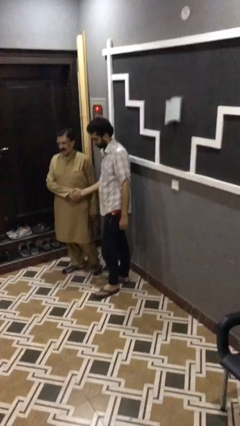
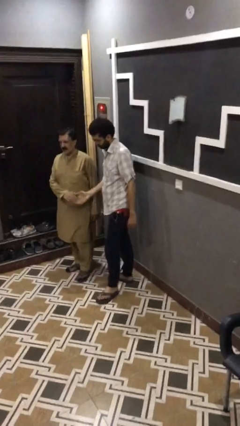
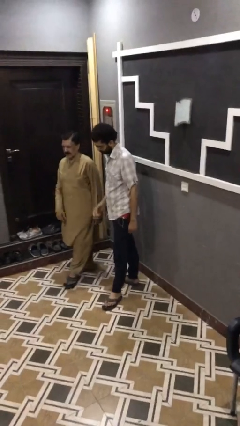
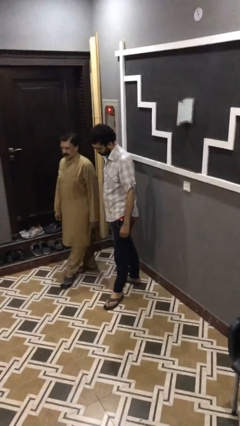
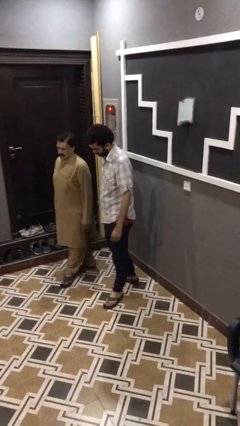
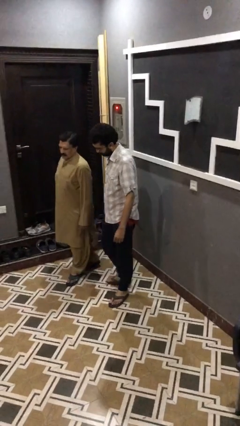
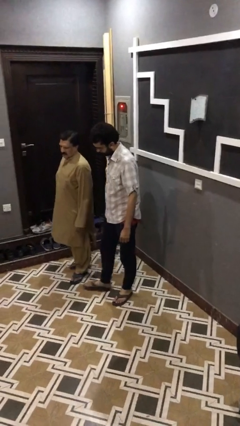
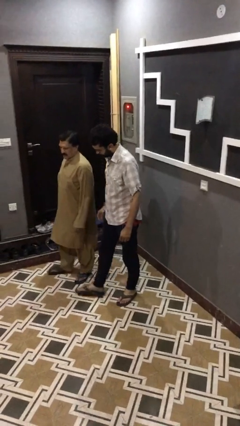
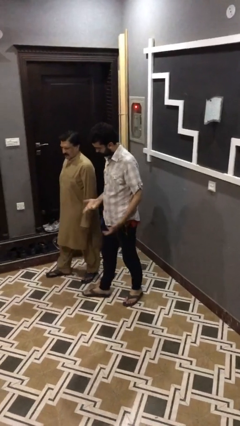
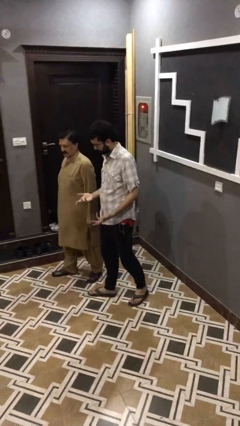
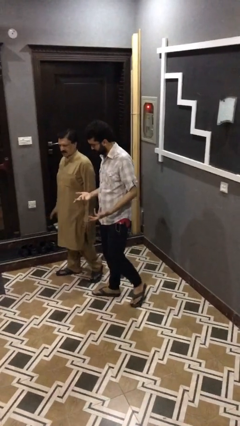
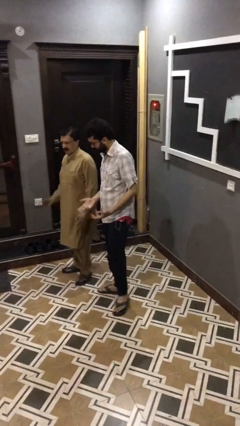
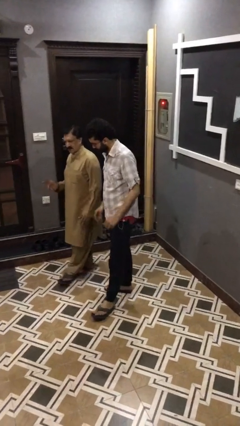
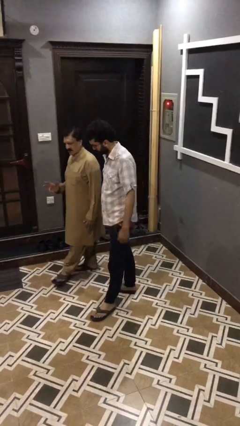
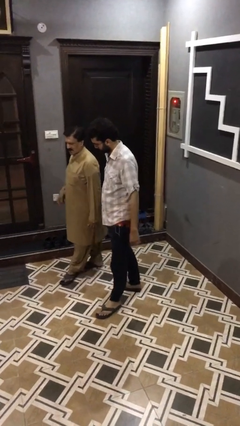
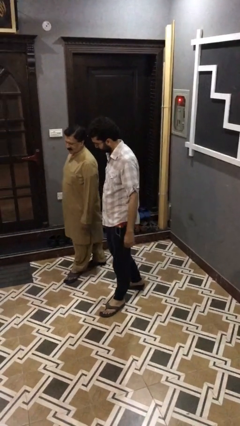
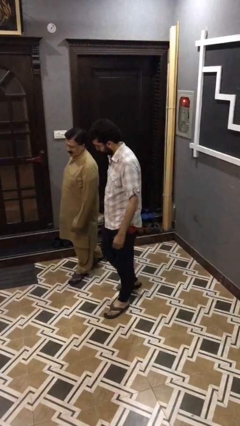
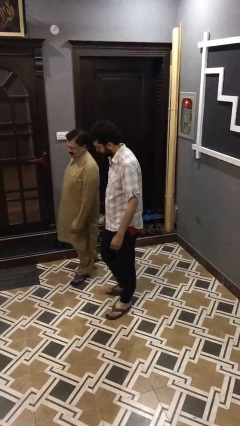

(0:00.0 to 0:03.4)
person talks to person

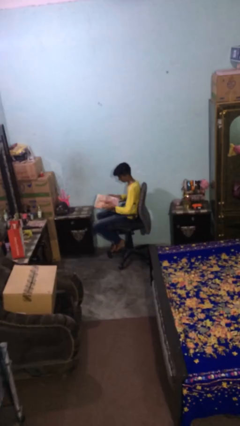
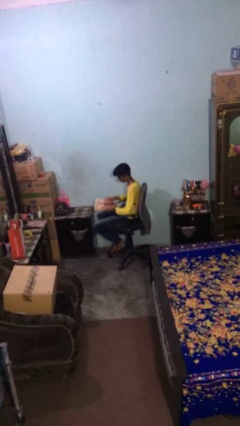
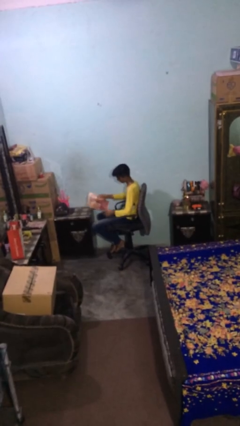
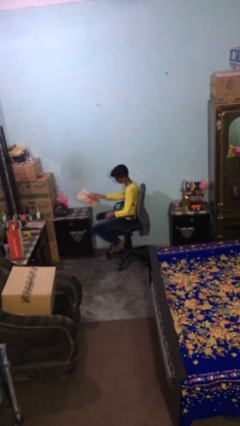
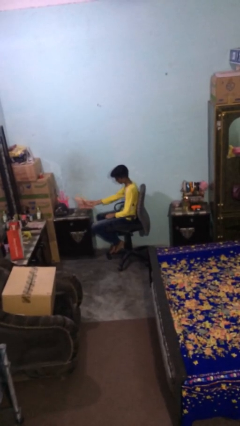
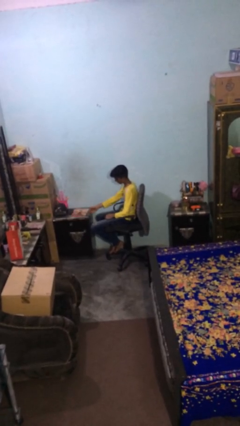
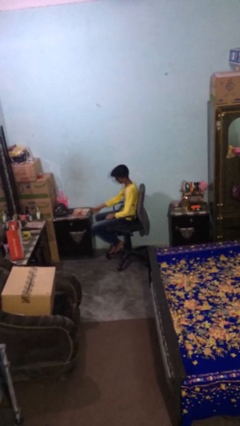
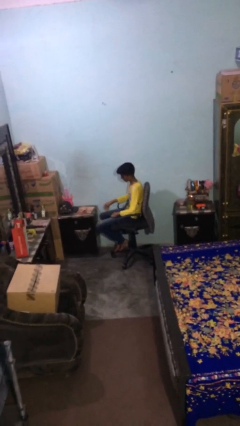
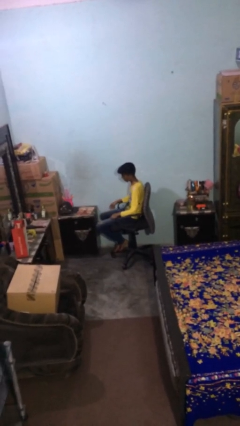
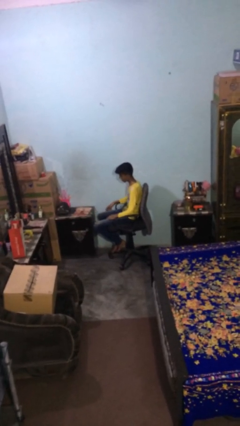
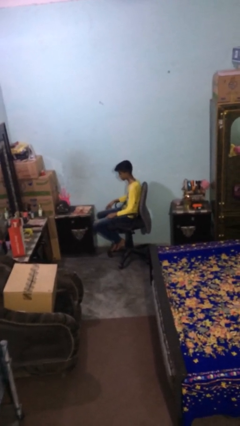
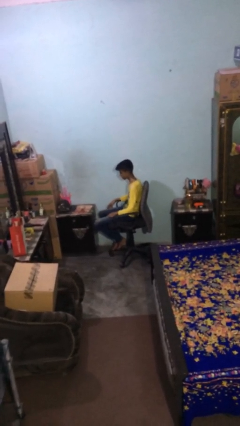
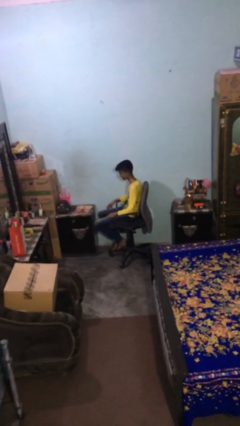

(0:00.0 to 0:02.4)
person puts down object on table

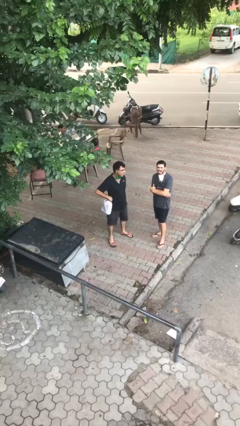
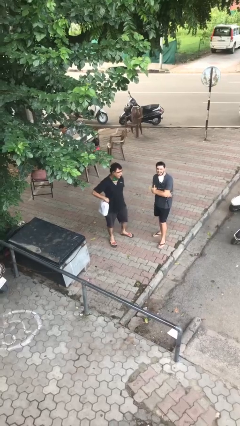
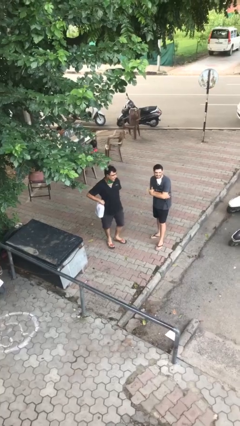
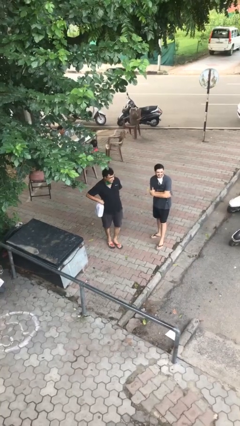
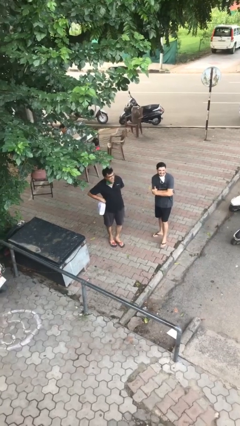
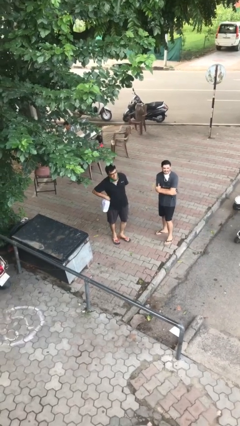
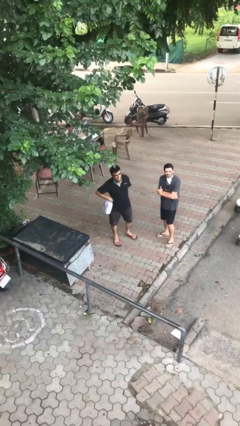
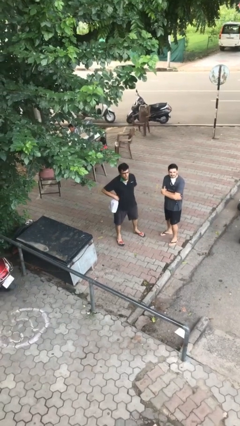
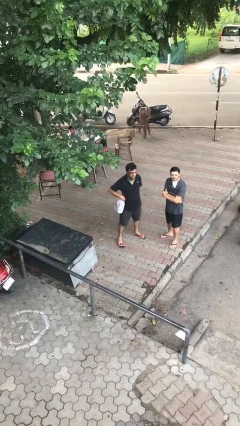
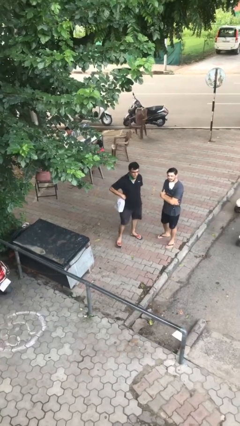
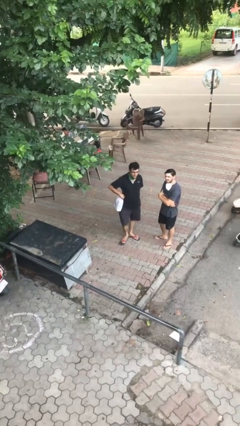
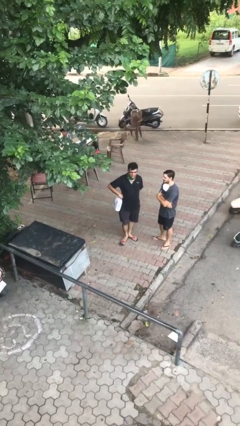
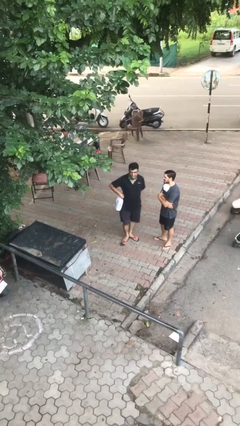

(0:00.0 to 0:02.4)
person laughs with person

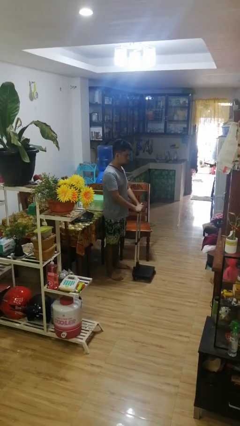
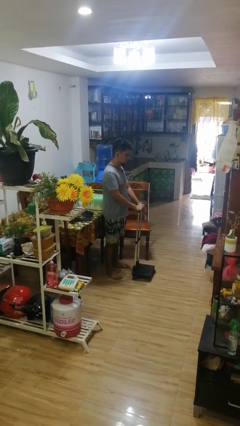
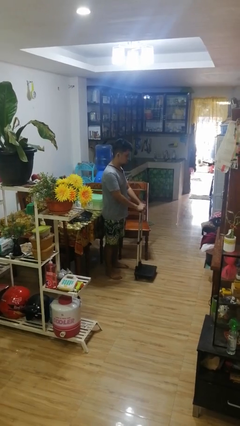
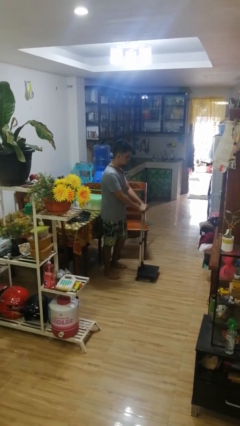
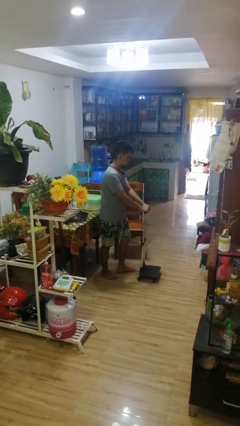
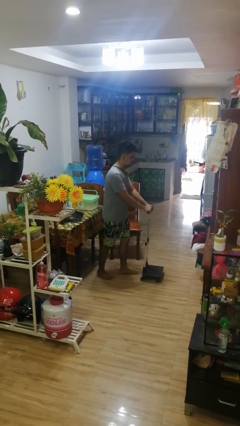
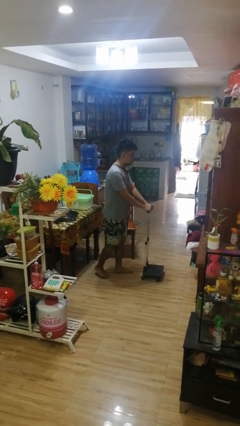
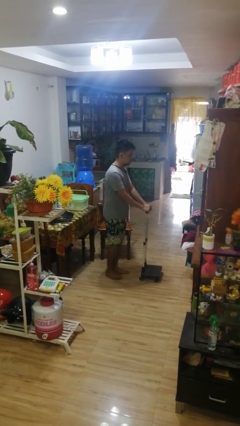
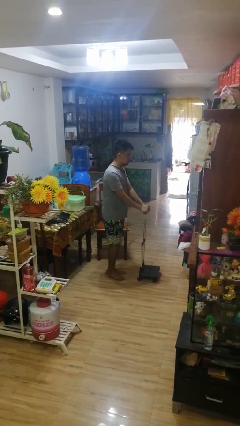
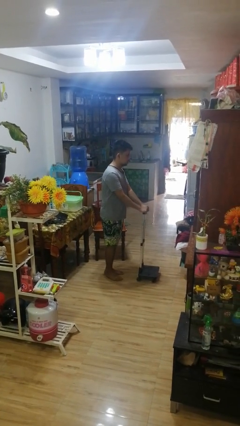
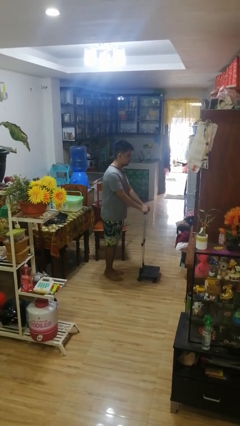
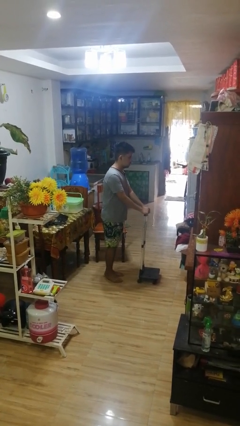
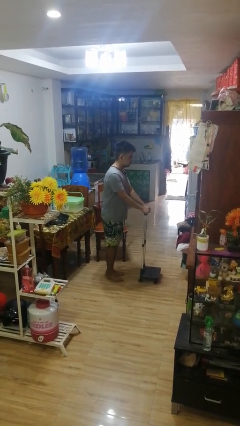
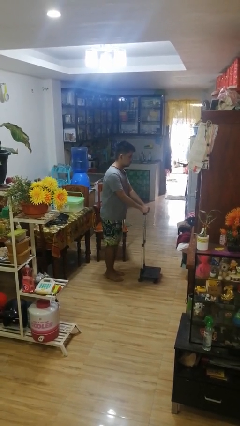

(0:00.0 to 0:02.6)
person pushes wheeled cart

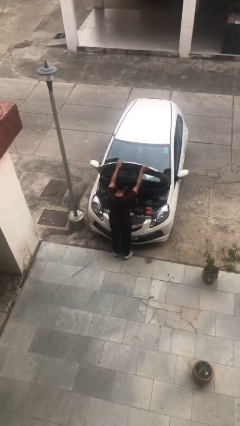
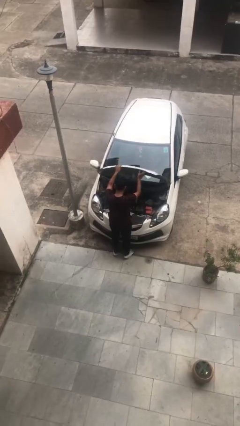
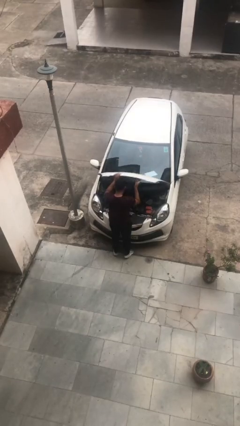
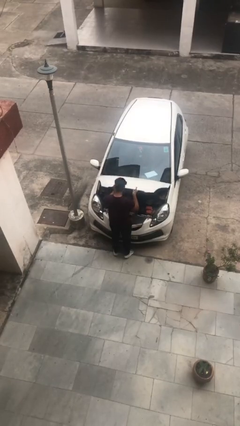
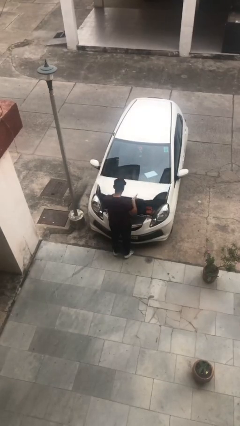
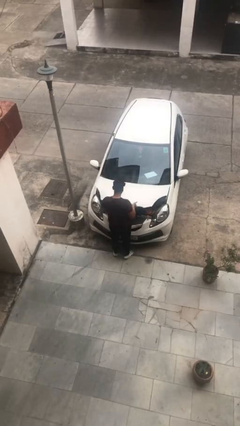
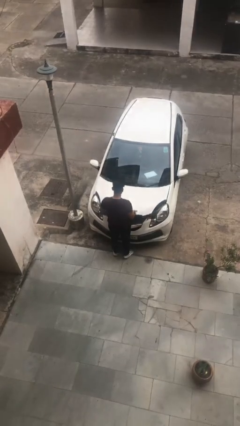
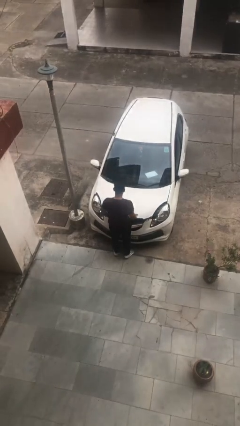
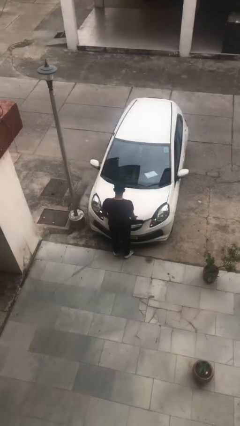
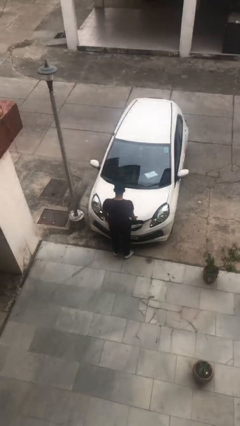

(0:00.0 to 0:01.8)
person closes car hood

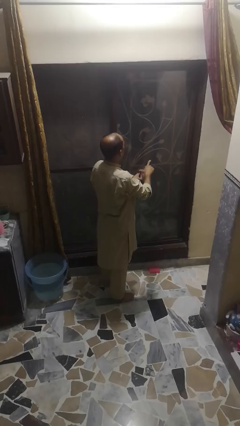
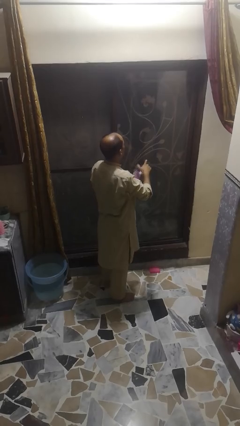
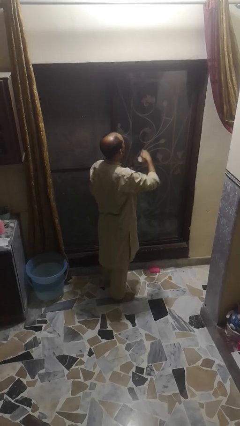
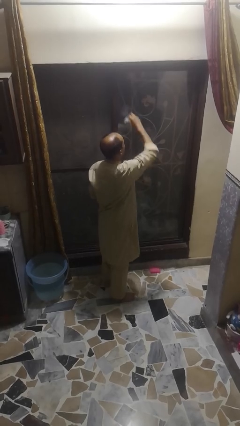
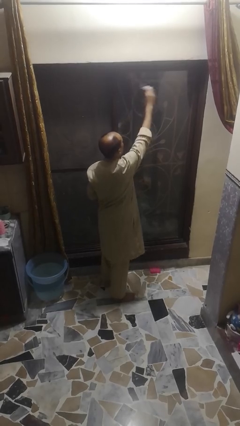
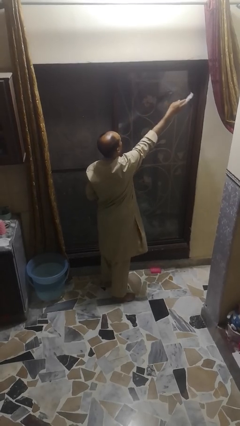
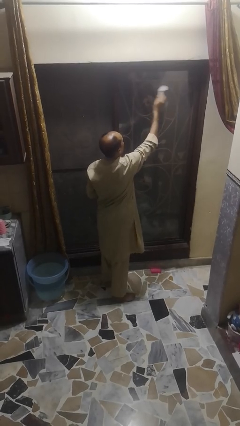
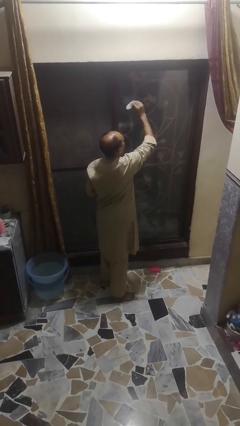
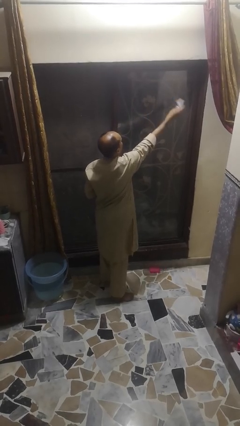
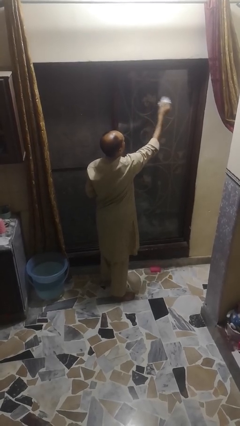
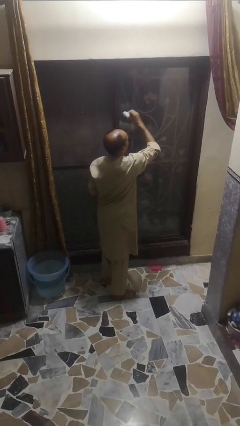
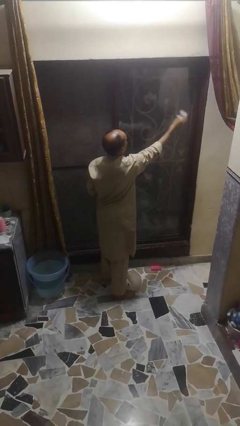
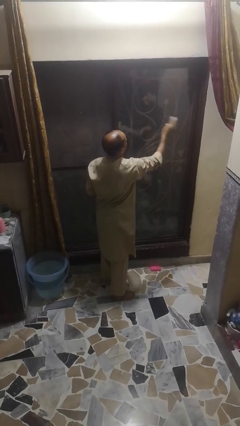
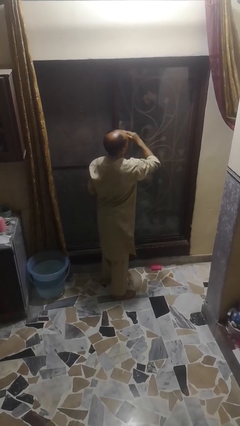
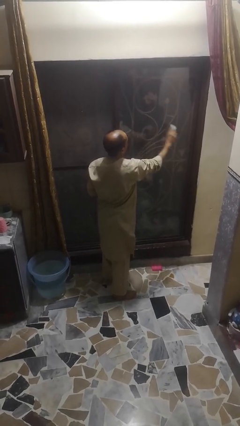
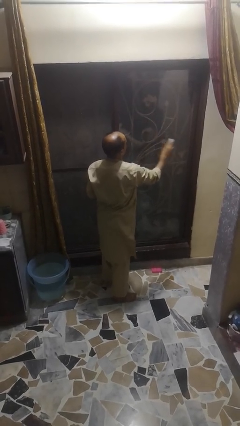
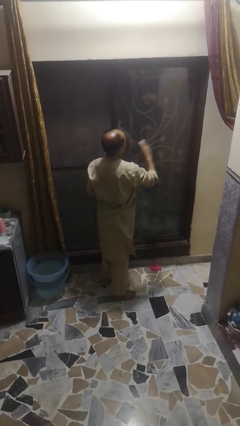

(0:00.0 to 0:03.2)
person washes window

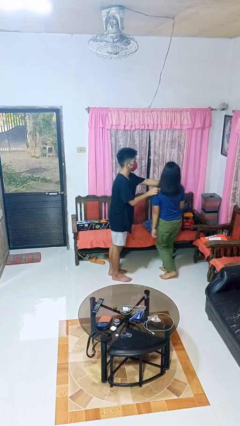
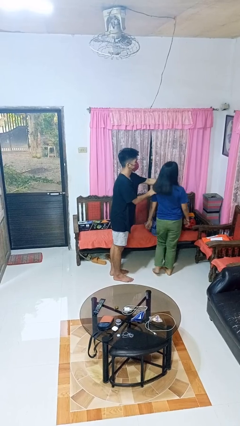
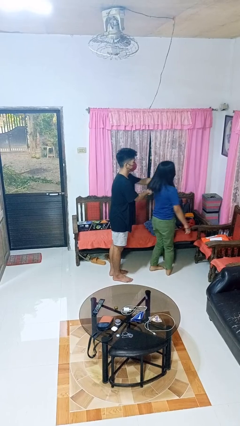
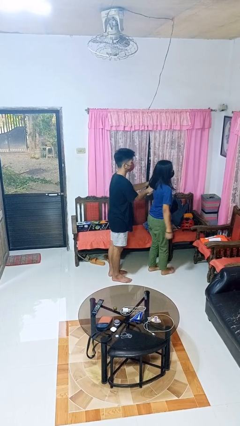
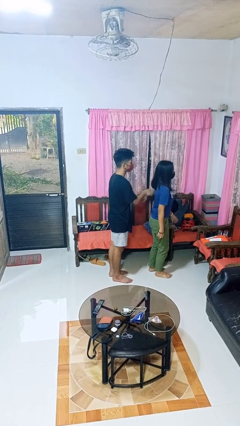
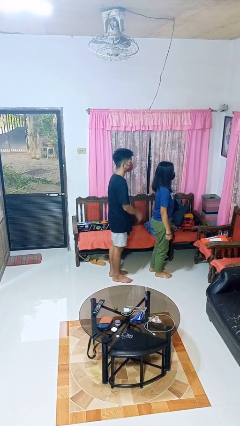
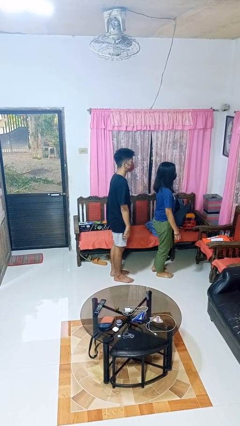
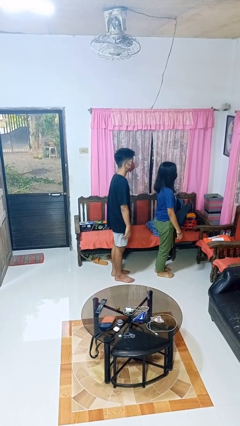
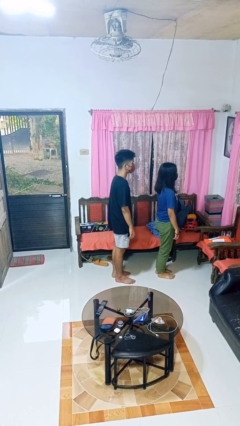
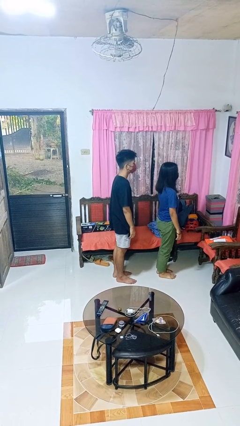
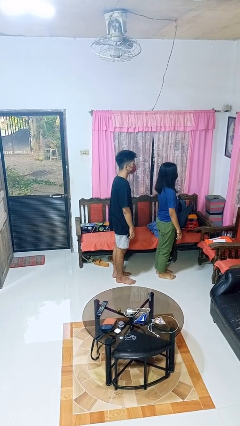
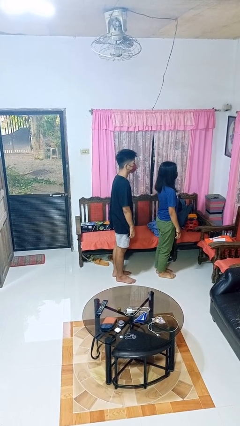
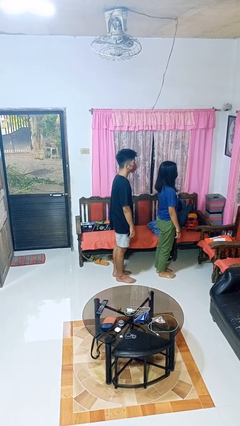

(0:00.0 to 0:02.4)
person spins person around
